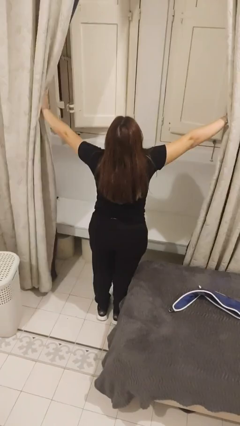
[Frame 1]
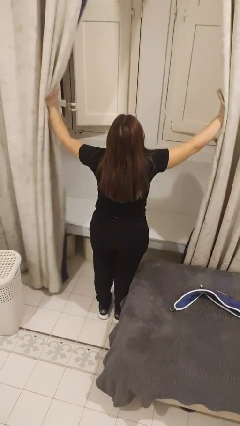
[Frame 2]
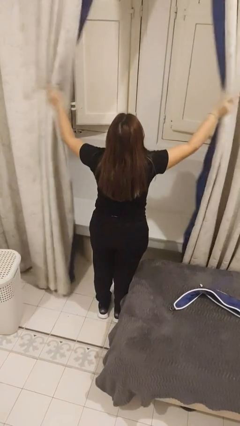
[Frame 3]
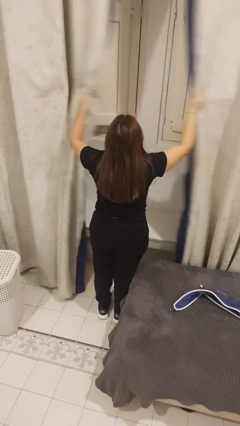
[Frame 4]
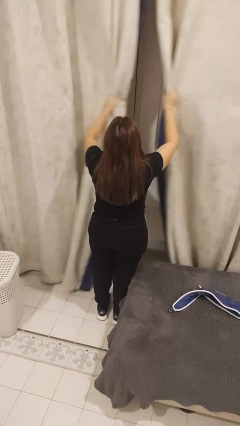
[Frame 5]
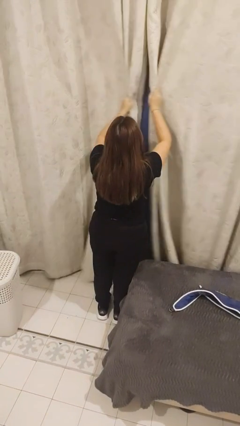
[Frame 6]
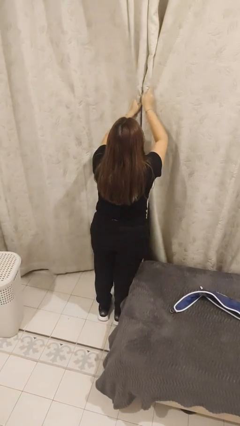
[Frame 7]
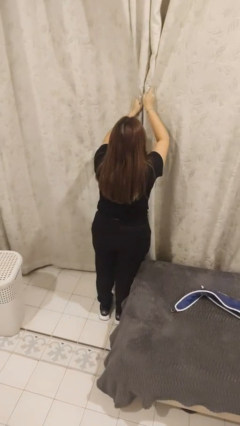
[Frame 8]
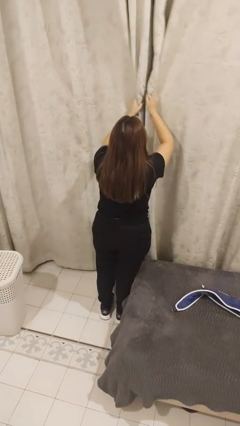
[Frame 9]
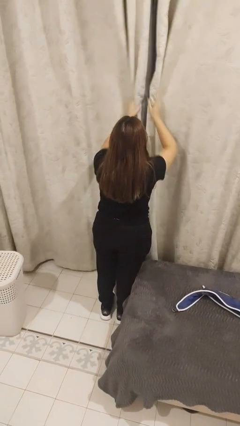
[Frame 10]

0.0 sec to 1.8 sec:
person closes curtains

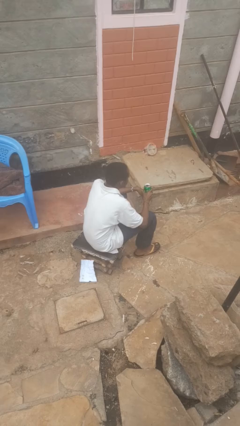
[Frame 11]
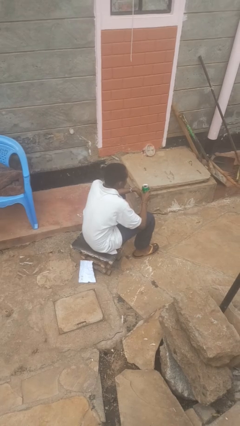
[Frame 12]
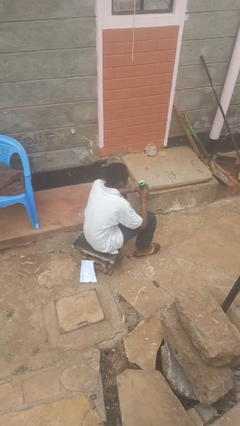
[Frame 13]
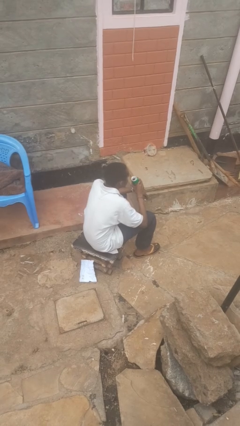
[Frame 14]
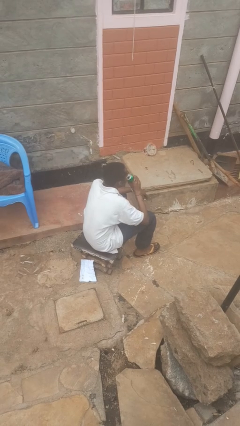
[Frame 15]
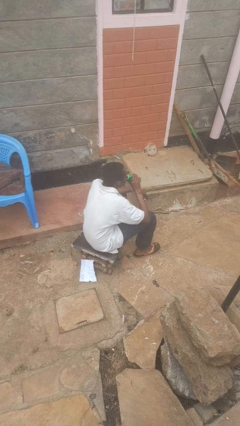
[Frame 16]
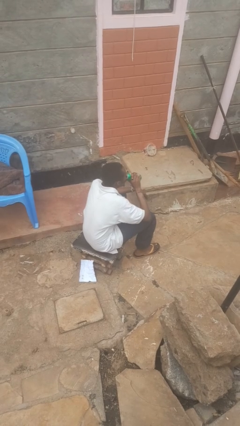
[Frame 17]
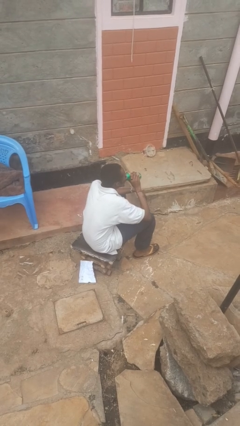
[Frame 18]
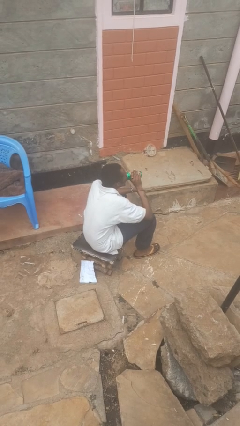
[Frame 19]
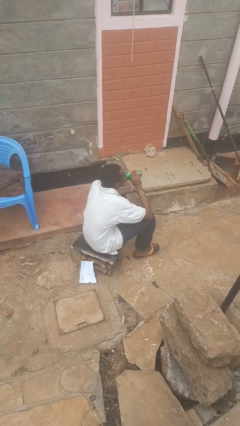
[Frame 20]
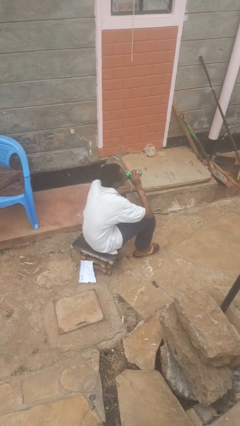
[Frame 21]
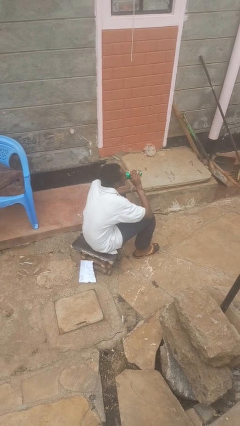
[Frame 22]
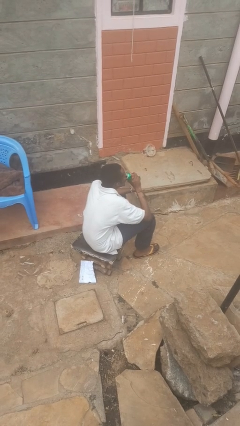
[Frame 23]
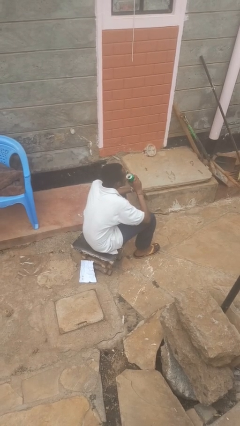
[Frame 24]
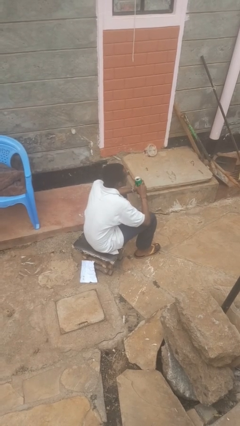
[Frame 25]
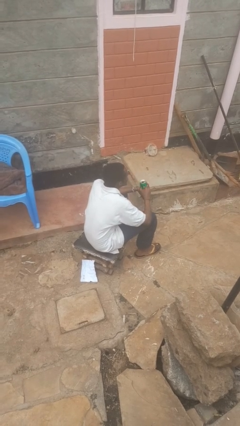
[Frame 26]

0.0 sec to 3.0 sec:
person drinks from beverage can

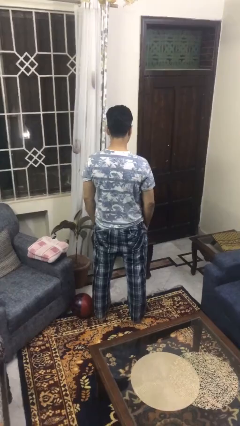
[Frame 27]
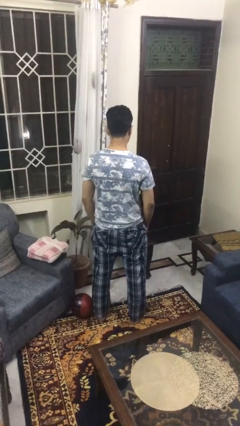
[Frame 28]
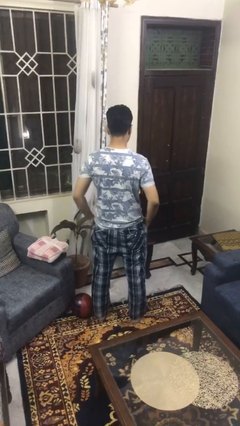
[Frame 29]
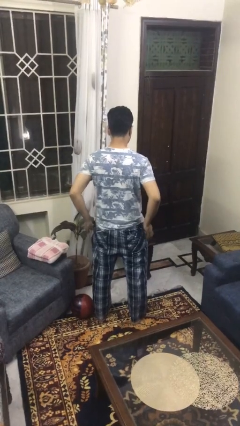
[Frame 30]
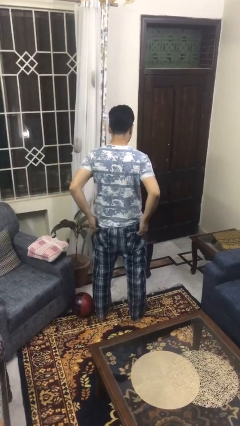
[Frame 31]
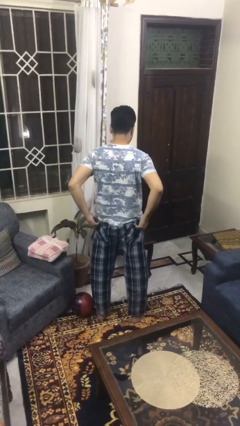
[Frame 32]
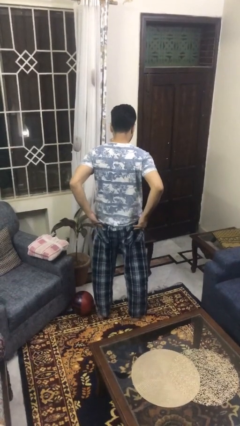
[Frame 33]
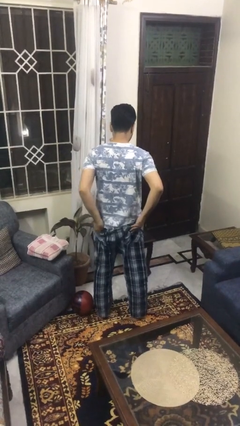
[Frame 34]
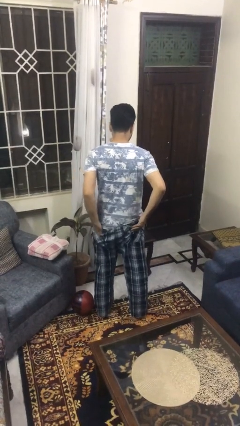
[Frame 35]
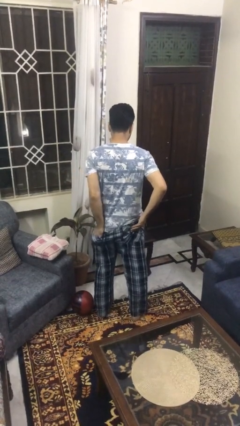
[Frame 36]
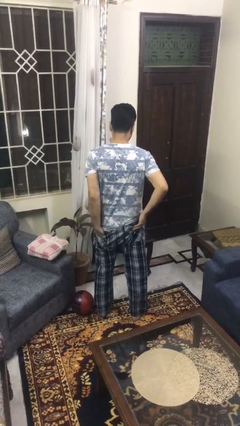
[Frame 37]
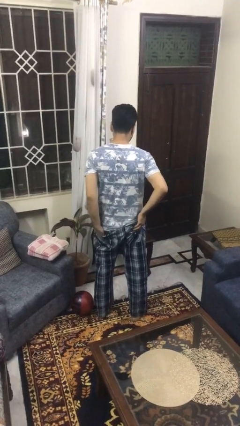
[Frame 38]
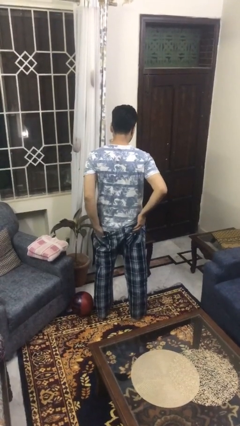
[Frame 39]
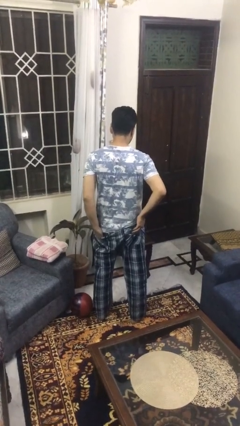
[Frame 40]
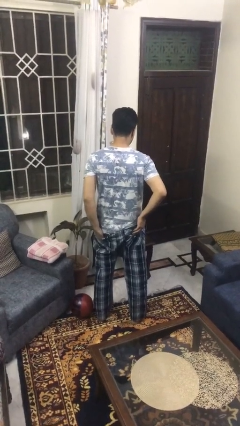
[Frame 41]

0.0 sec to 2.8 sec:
person puts hands in back pockets

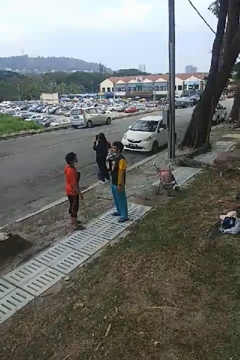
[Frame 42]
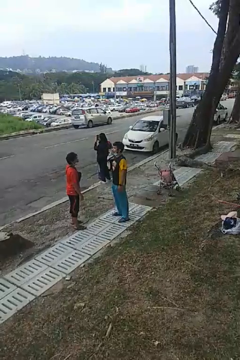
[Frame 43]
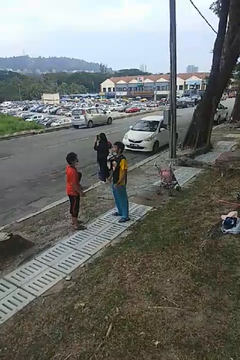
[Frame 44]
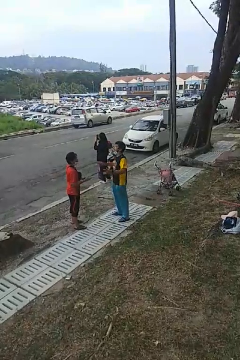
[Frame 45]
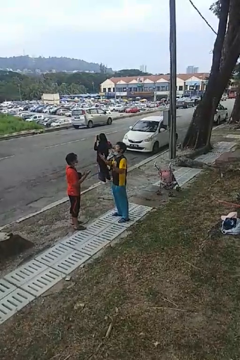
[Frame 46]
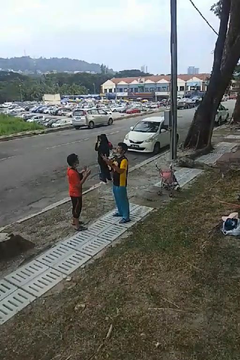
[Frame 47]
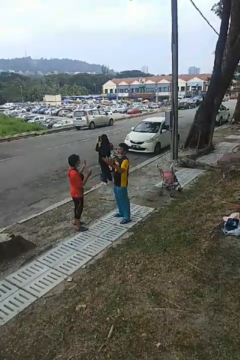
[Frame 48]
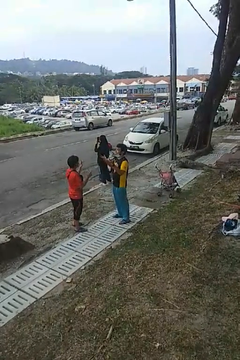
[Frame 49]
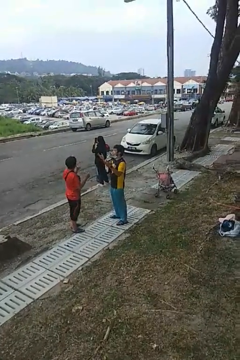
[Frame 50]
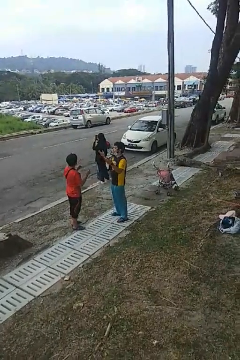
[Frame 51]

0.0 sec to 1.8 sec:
person talks to person

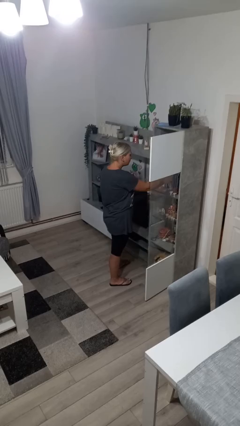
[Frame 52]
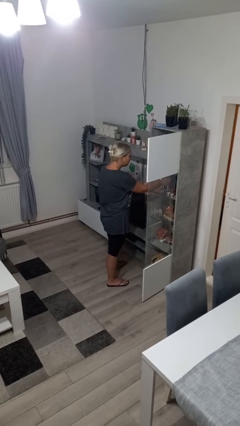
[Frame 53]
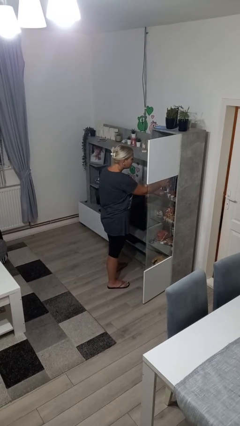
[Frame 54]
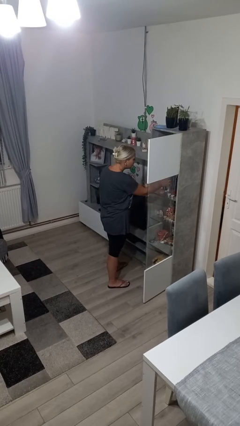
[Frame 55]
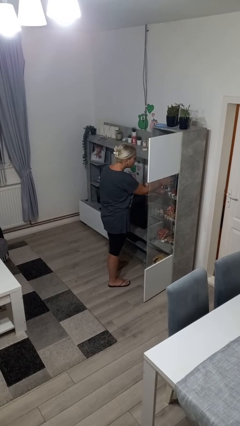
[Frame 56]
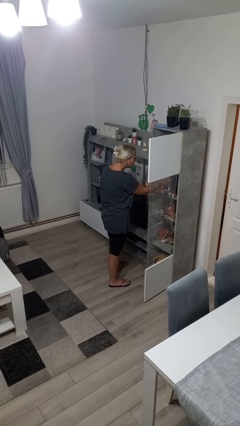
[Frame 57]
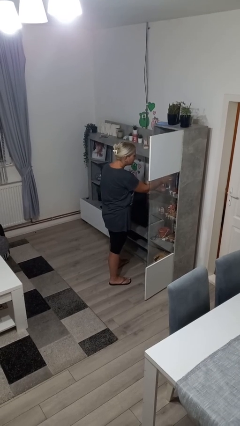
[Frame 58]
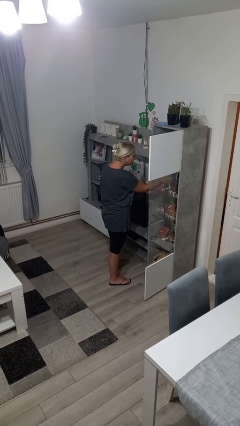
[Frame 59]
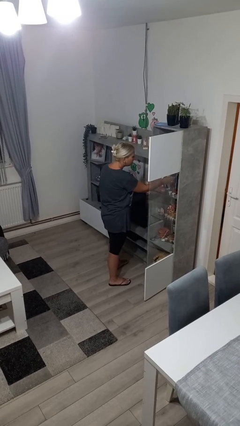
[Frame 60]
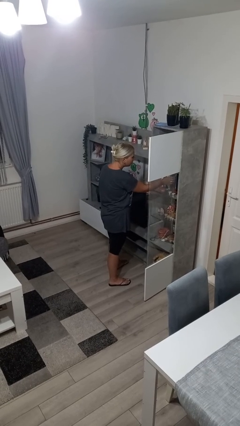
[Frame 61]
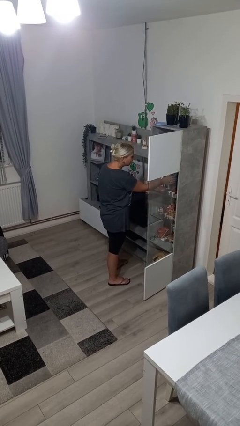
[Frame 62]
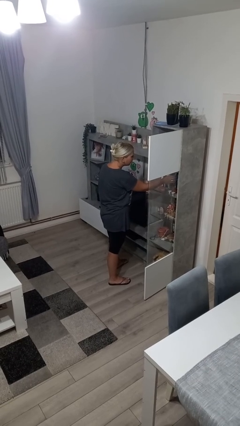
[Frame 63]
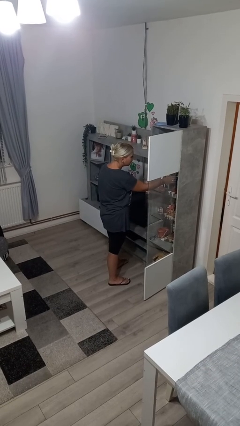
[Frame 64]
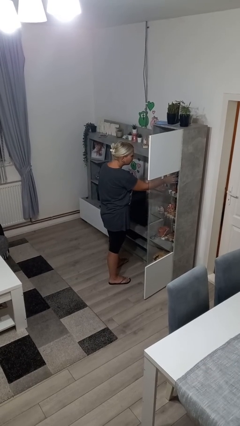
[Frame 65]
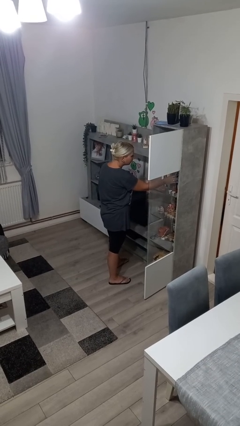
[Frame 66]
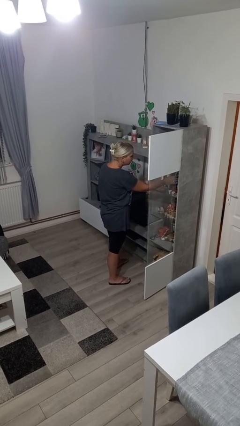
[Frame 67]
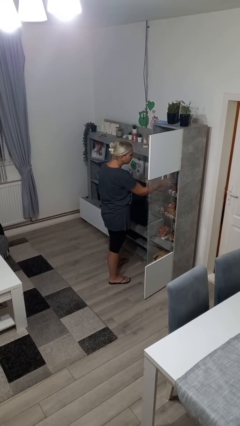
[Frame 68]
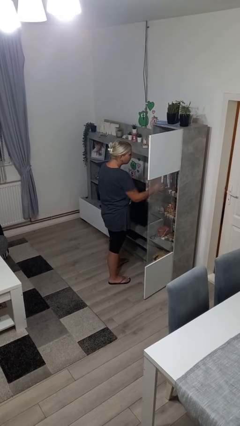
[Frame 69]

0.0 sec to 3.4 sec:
person searches in cabinet

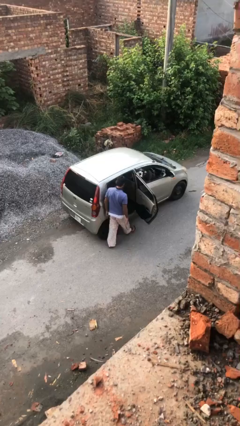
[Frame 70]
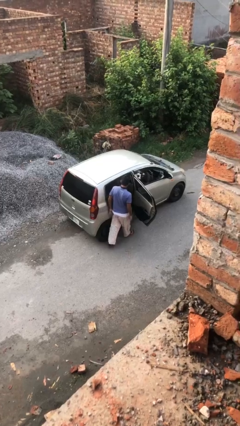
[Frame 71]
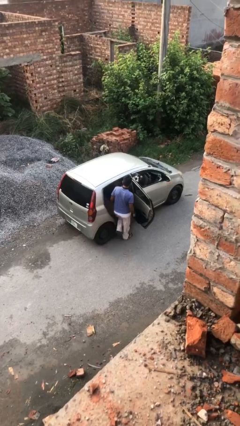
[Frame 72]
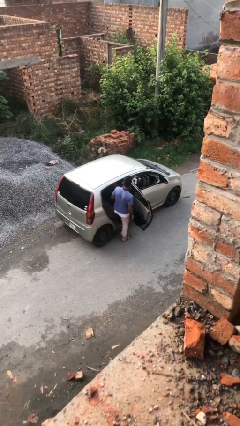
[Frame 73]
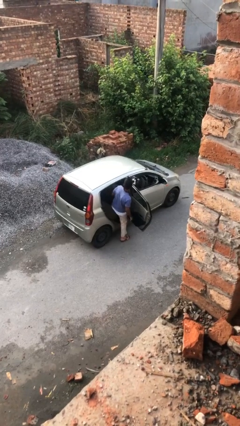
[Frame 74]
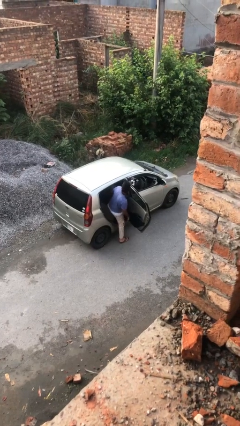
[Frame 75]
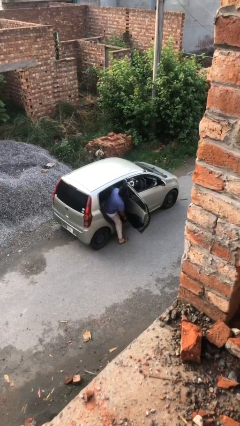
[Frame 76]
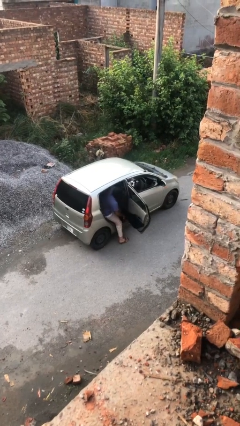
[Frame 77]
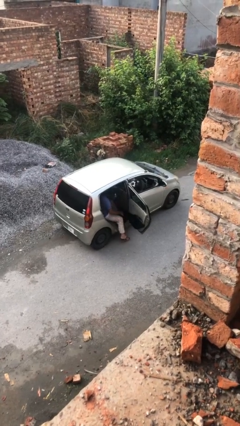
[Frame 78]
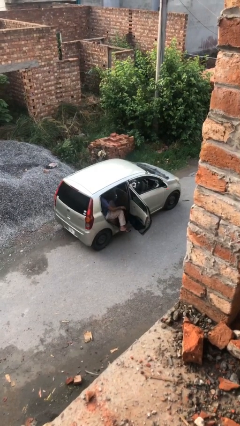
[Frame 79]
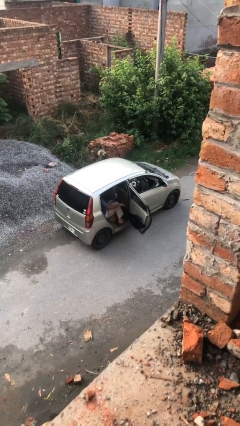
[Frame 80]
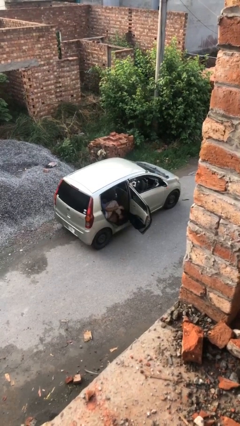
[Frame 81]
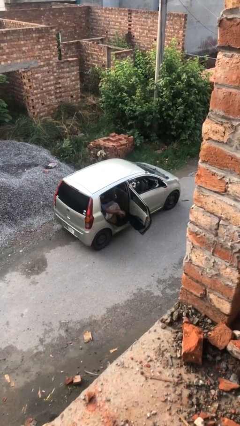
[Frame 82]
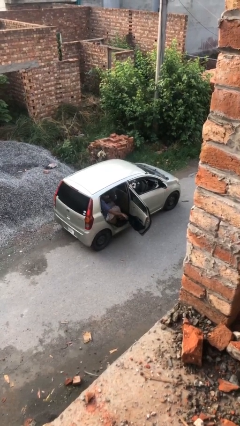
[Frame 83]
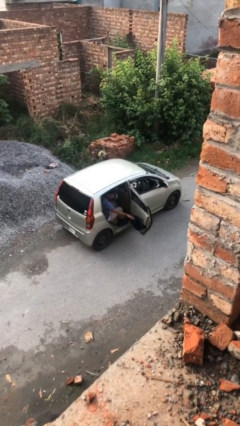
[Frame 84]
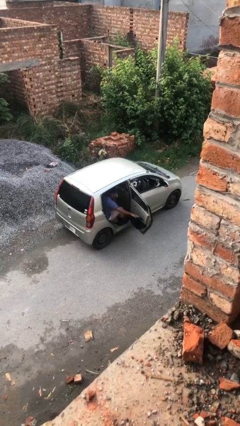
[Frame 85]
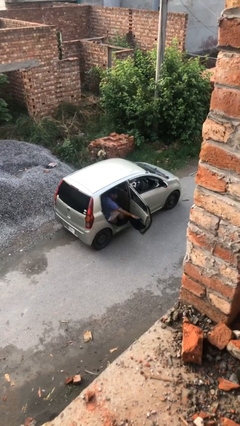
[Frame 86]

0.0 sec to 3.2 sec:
person enters car

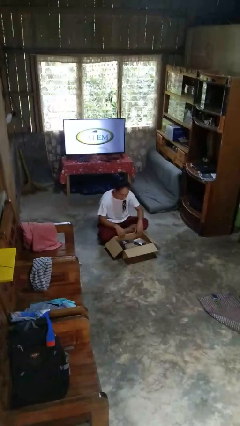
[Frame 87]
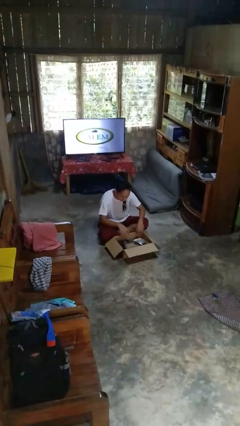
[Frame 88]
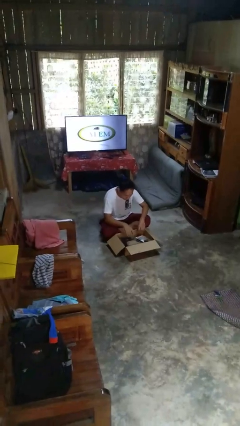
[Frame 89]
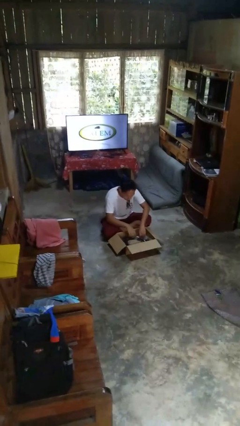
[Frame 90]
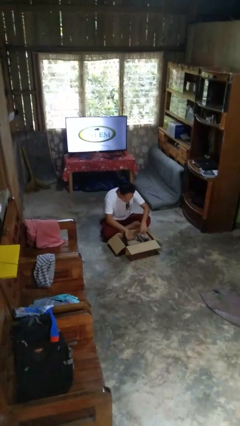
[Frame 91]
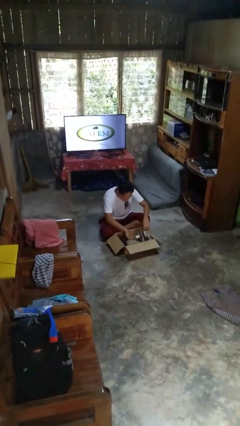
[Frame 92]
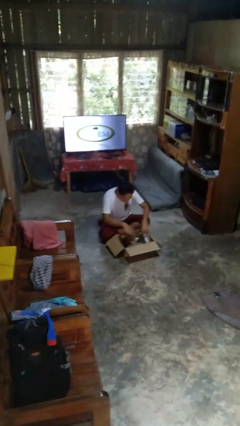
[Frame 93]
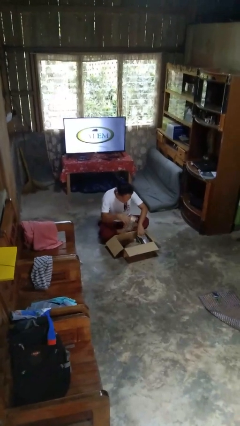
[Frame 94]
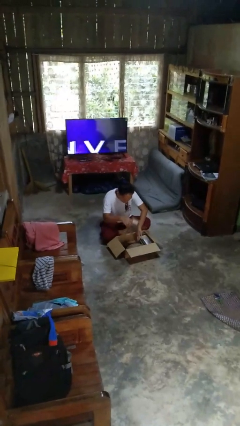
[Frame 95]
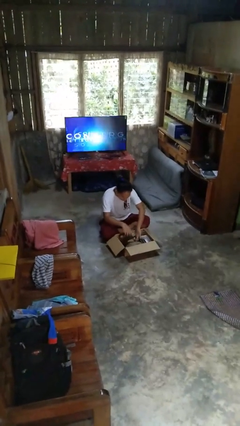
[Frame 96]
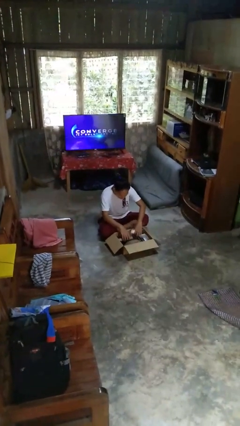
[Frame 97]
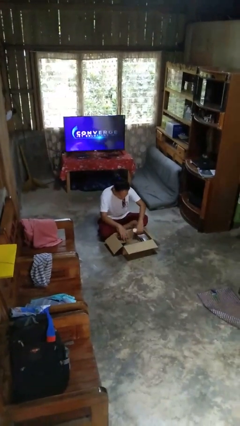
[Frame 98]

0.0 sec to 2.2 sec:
person searches in box
